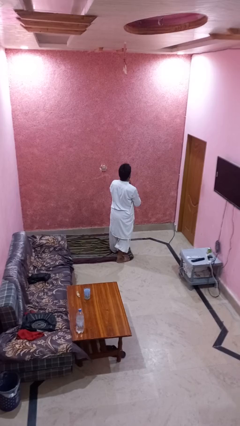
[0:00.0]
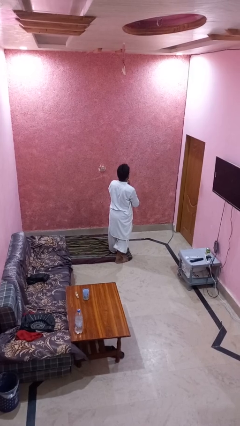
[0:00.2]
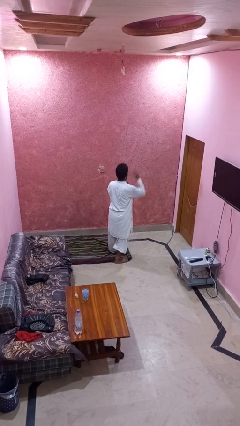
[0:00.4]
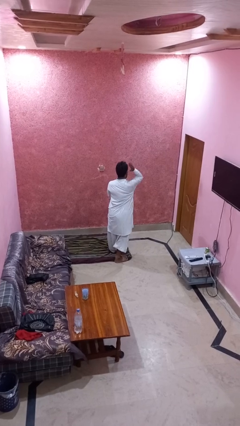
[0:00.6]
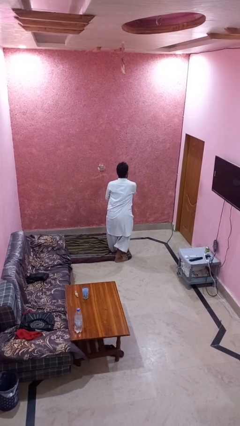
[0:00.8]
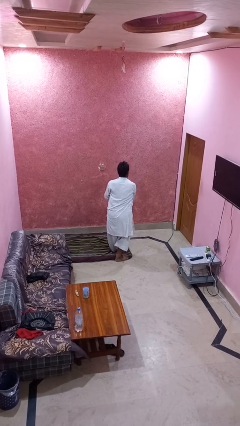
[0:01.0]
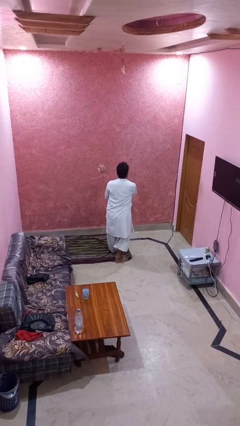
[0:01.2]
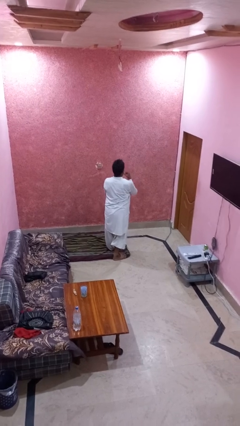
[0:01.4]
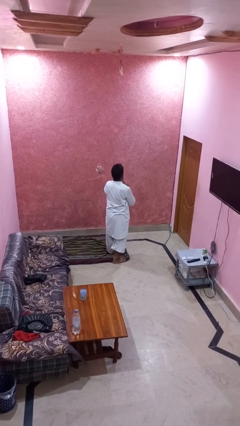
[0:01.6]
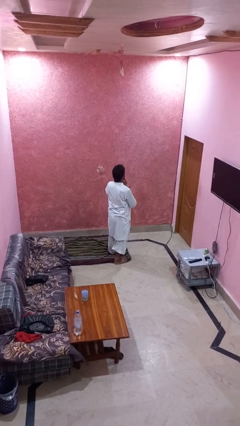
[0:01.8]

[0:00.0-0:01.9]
person karate chop

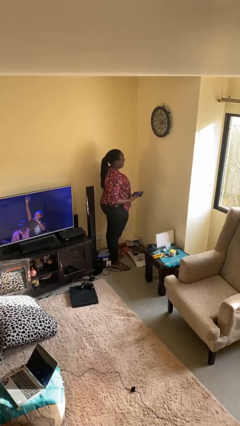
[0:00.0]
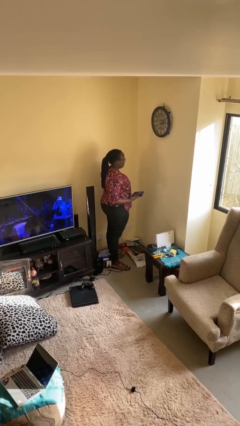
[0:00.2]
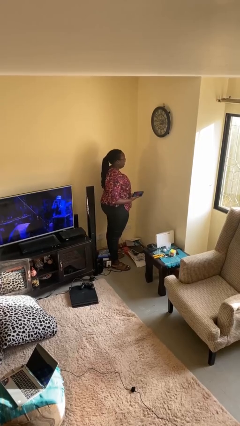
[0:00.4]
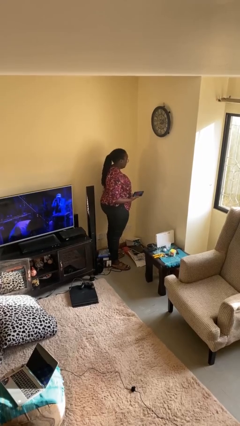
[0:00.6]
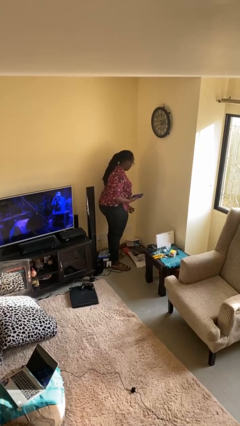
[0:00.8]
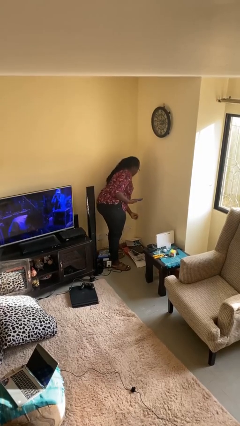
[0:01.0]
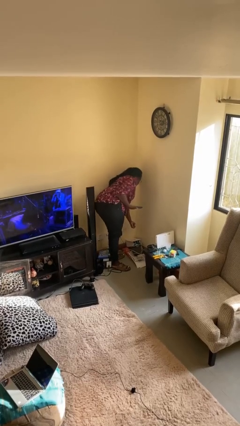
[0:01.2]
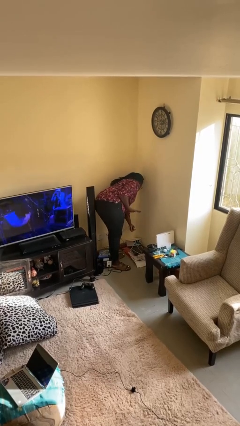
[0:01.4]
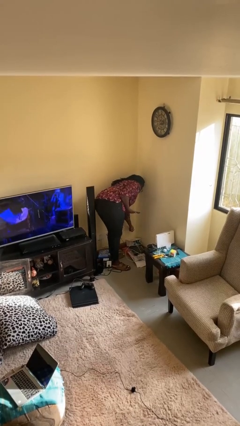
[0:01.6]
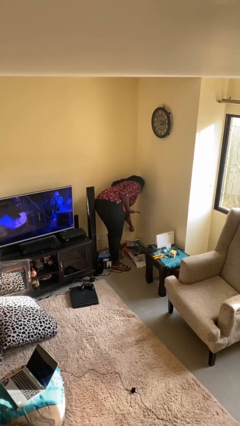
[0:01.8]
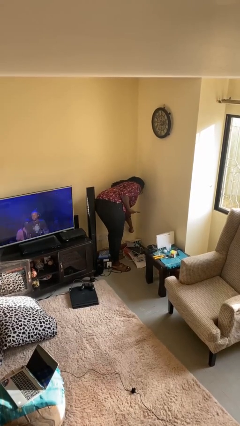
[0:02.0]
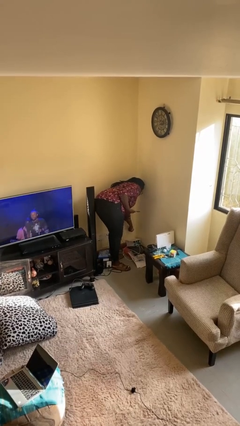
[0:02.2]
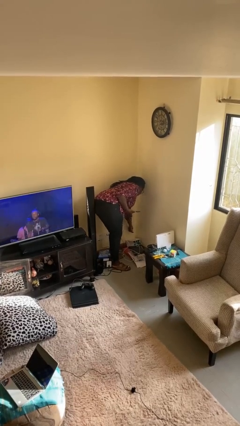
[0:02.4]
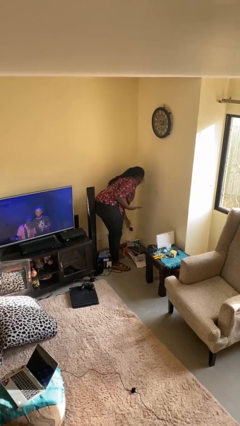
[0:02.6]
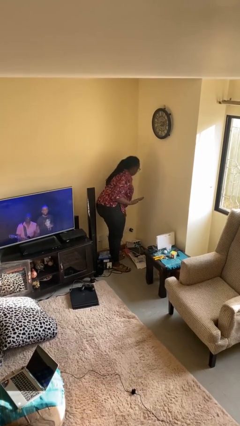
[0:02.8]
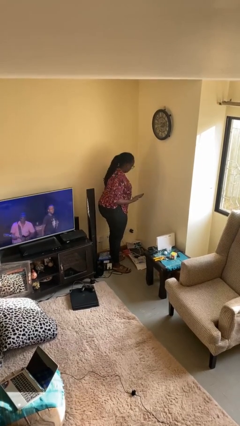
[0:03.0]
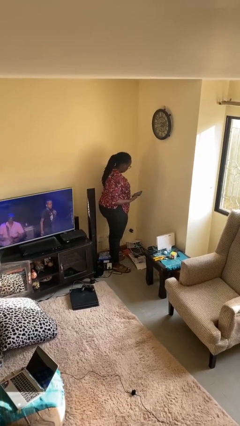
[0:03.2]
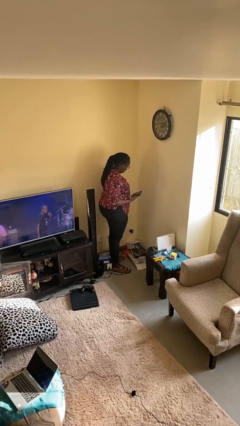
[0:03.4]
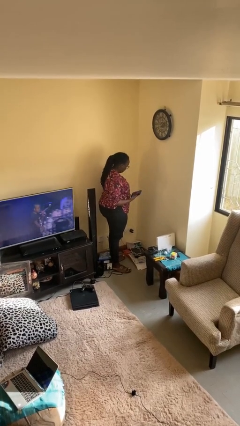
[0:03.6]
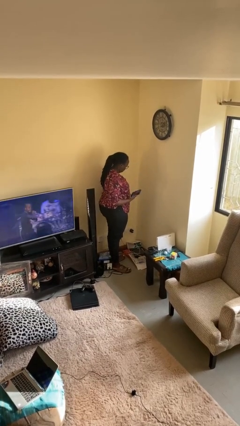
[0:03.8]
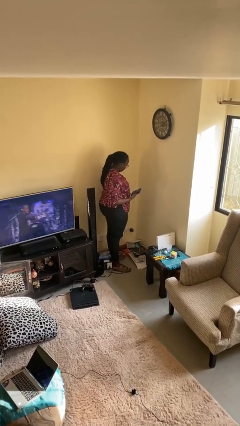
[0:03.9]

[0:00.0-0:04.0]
person plugs into electrical socket

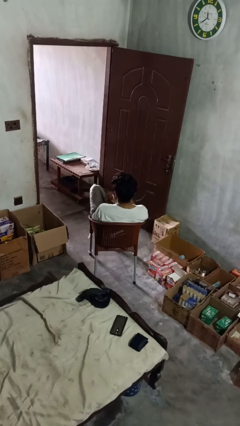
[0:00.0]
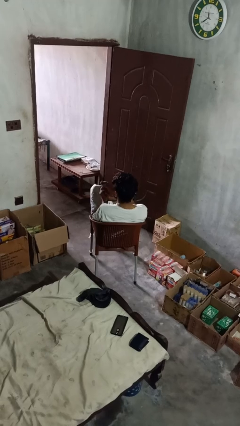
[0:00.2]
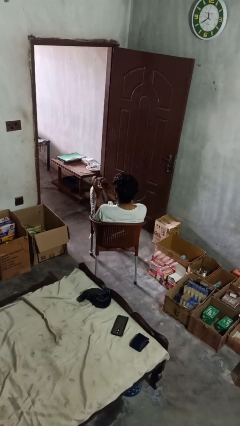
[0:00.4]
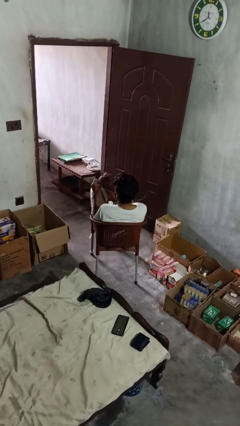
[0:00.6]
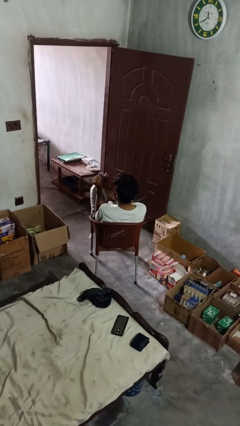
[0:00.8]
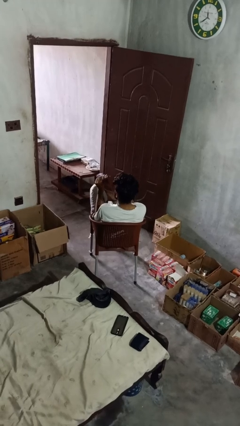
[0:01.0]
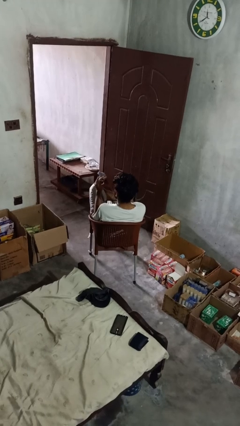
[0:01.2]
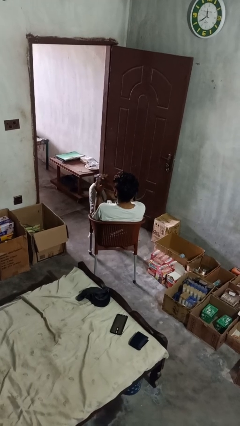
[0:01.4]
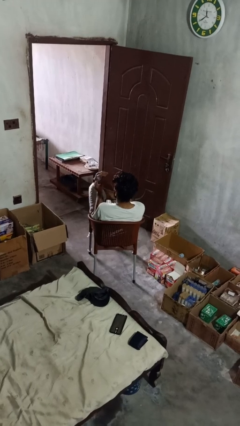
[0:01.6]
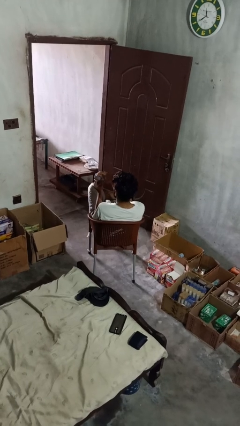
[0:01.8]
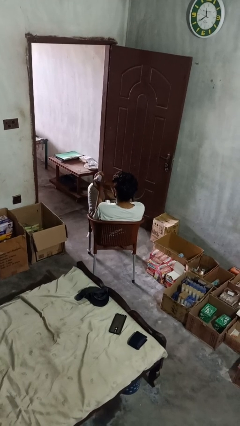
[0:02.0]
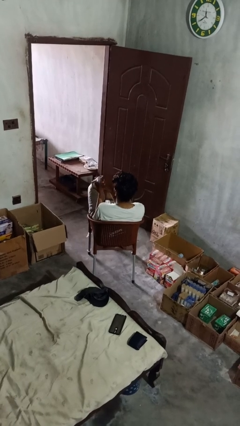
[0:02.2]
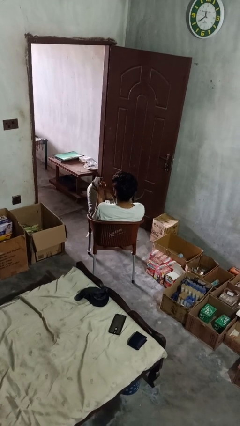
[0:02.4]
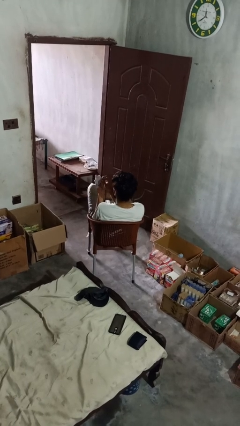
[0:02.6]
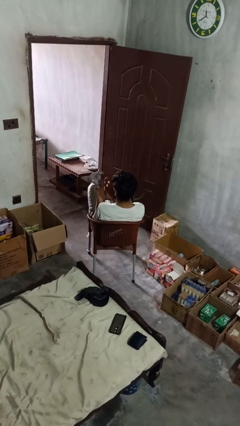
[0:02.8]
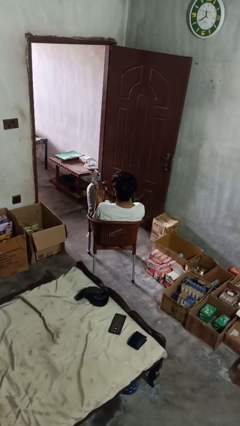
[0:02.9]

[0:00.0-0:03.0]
person puts on gloves

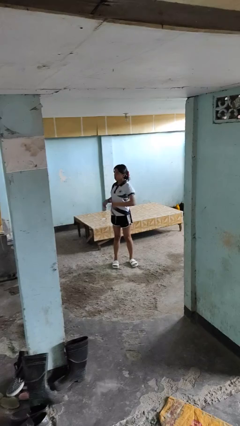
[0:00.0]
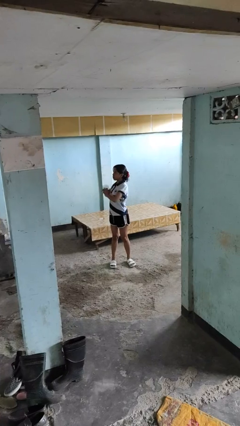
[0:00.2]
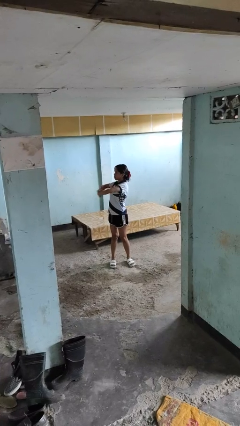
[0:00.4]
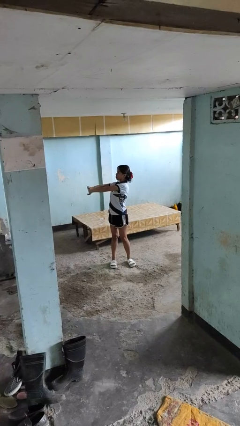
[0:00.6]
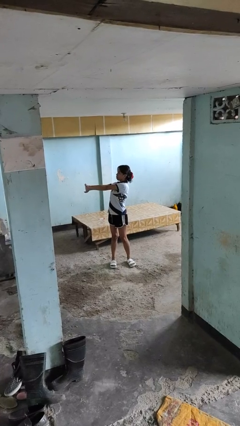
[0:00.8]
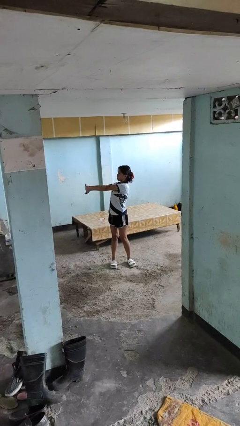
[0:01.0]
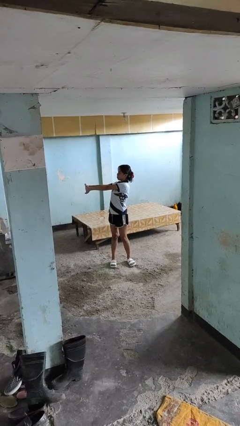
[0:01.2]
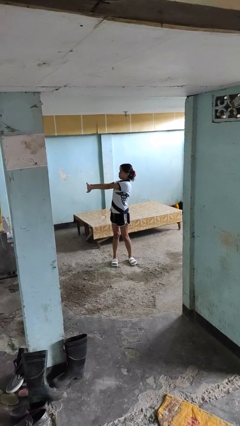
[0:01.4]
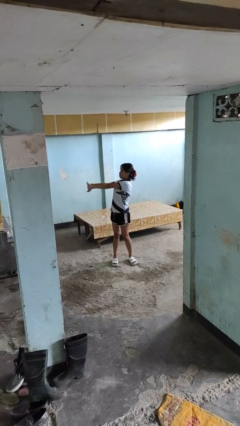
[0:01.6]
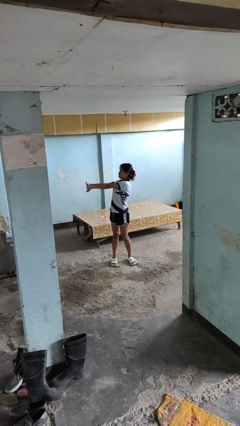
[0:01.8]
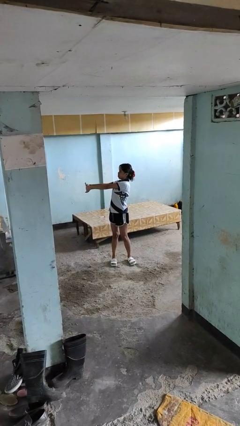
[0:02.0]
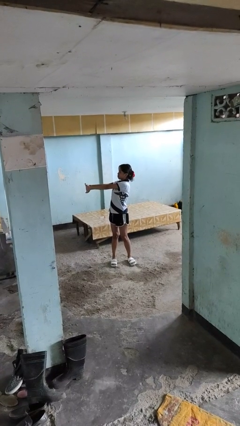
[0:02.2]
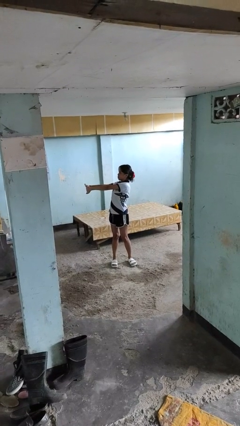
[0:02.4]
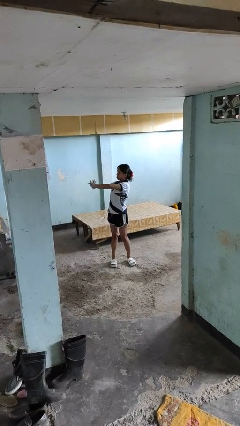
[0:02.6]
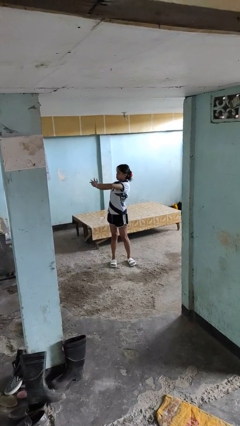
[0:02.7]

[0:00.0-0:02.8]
person stretches arms to side

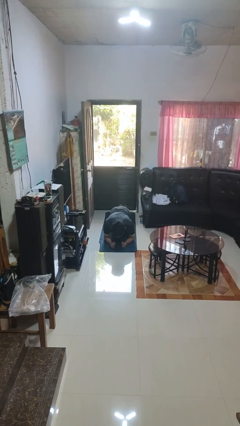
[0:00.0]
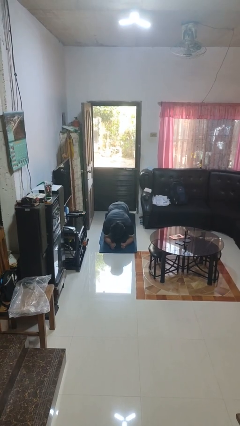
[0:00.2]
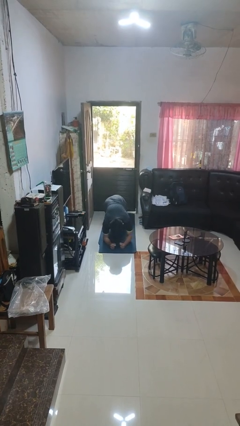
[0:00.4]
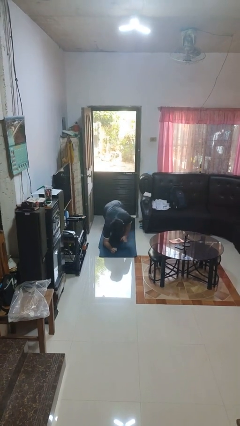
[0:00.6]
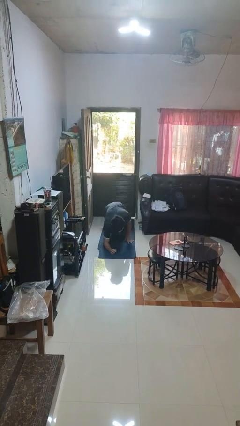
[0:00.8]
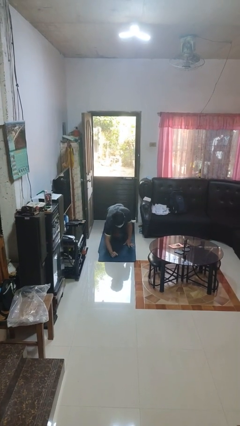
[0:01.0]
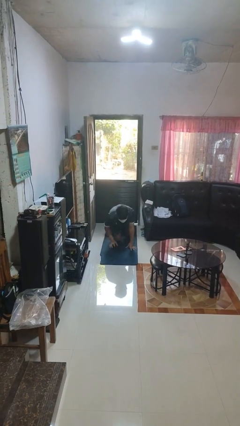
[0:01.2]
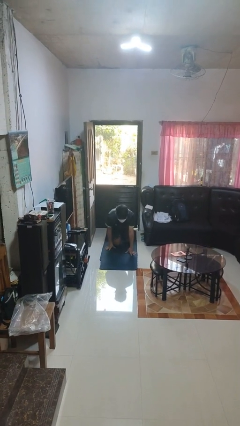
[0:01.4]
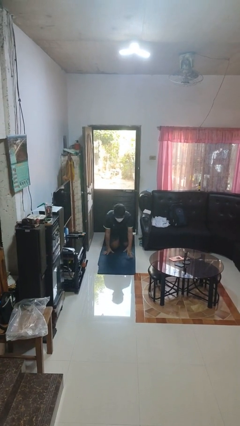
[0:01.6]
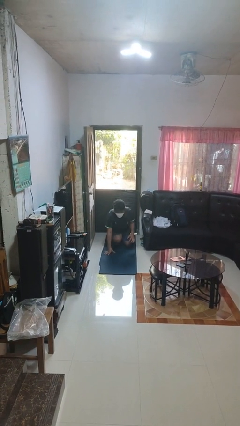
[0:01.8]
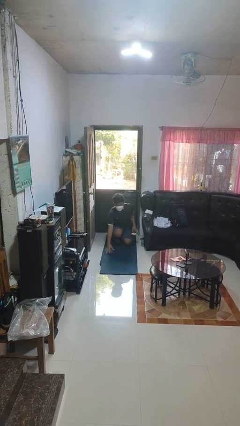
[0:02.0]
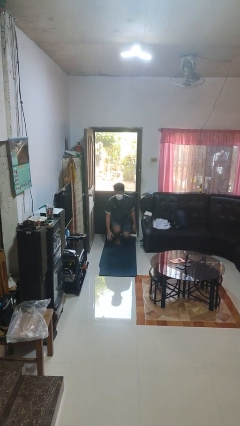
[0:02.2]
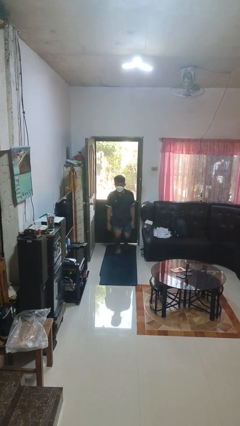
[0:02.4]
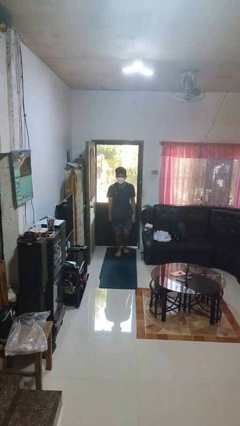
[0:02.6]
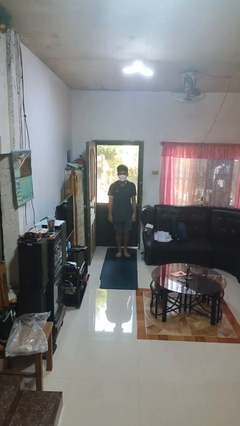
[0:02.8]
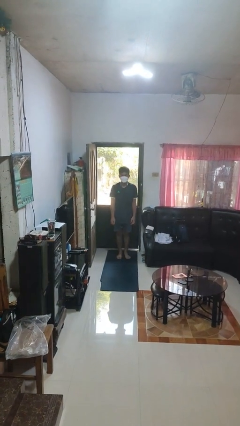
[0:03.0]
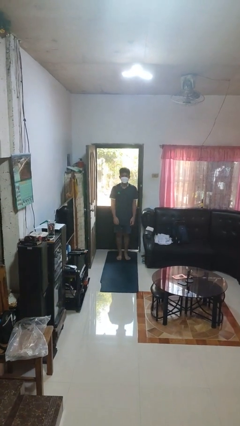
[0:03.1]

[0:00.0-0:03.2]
person stands up from floor

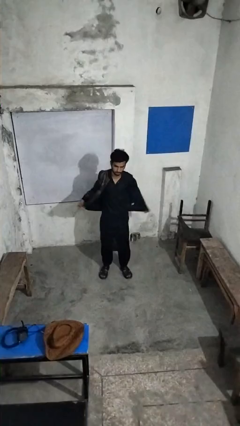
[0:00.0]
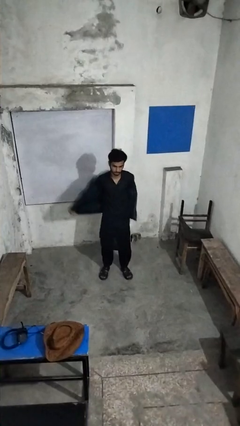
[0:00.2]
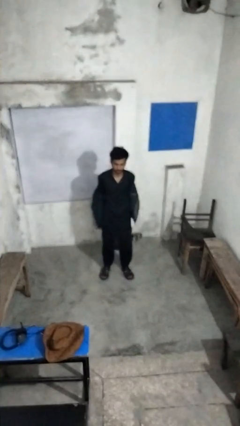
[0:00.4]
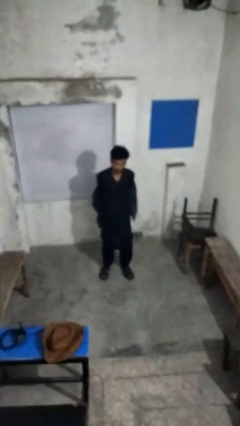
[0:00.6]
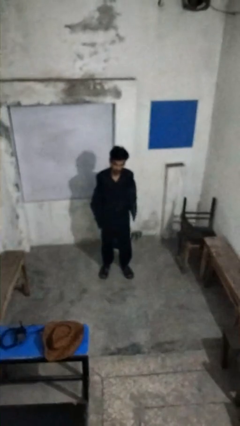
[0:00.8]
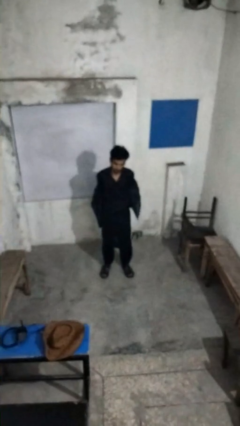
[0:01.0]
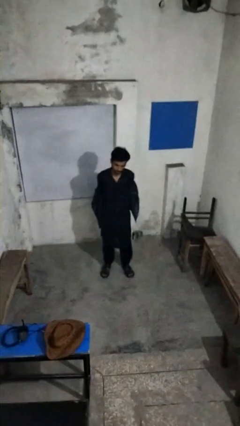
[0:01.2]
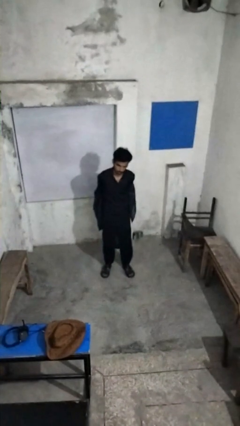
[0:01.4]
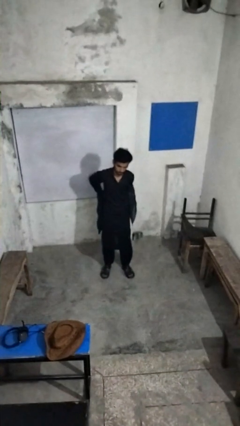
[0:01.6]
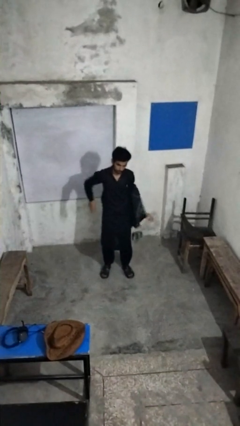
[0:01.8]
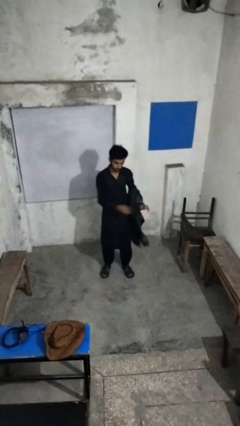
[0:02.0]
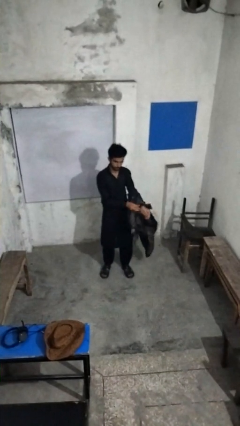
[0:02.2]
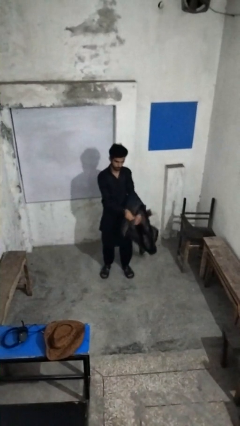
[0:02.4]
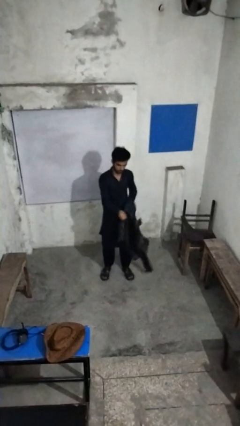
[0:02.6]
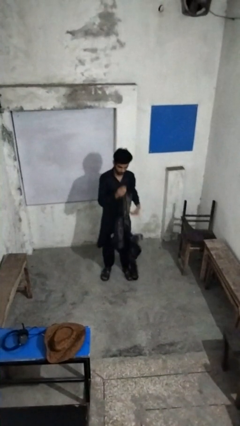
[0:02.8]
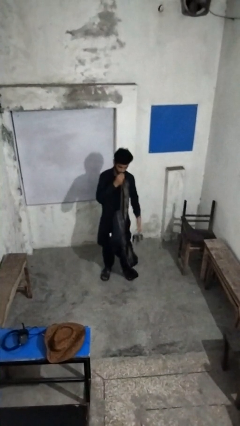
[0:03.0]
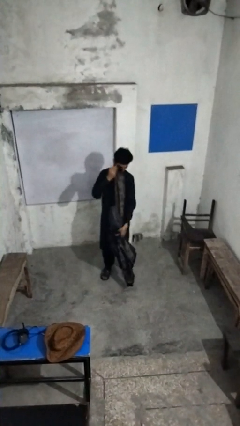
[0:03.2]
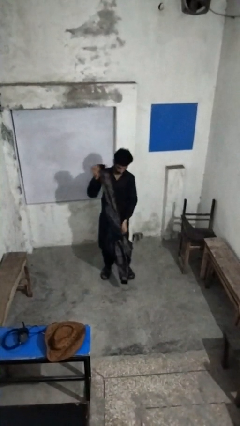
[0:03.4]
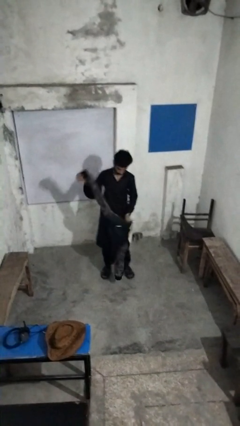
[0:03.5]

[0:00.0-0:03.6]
person takes off jacket
